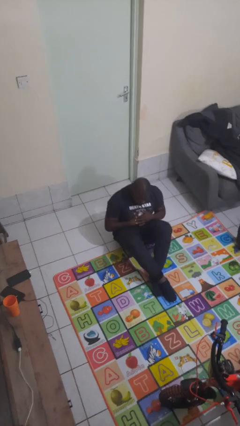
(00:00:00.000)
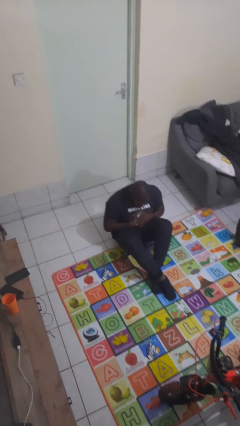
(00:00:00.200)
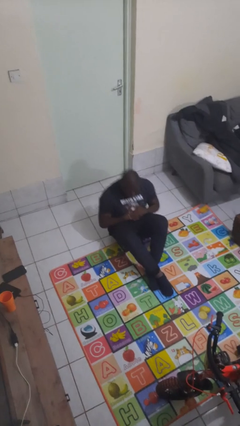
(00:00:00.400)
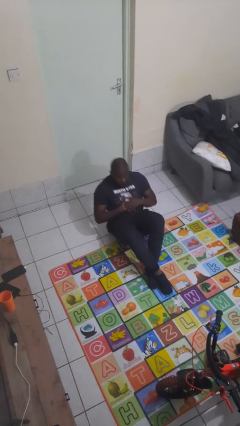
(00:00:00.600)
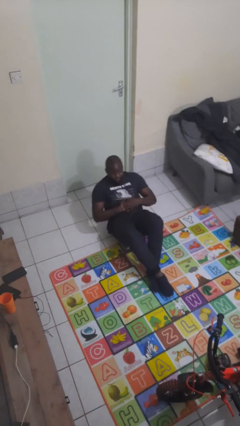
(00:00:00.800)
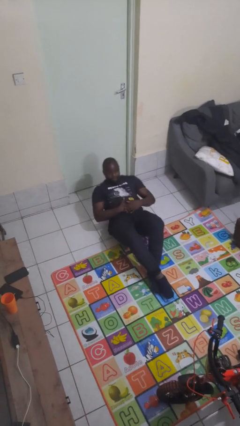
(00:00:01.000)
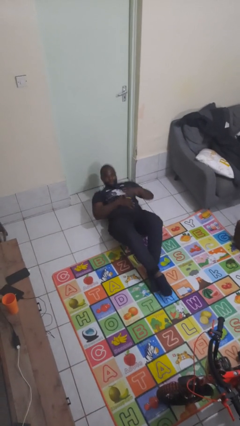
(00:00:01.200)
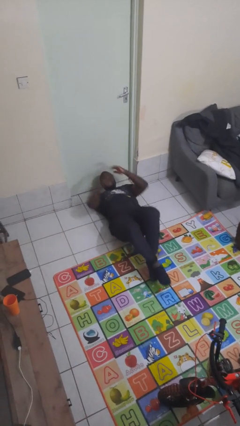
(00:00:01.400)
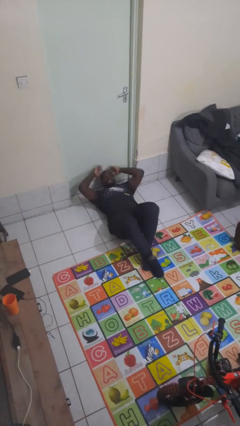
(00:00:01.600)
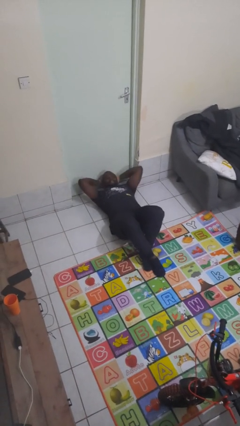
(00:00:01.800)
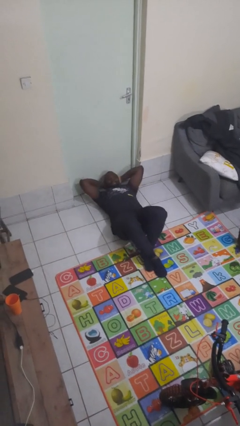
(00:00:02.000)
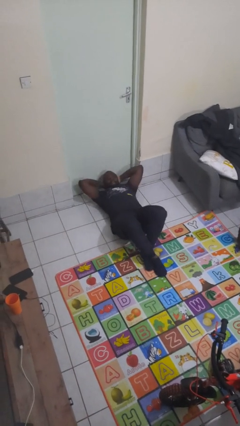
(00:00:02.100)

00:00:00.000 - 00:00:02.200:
person exercises with situp

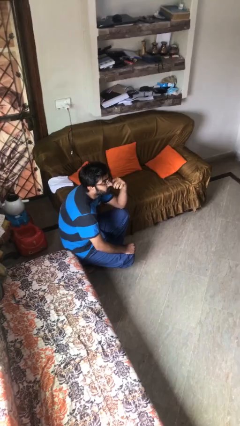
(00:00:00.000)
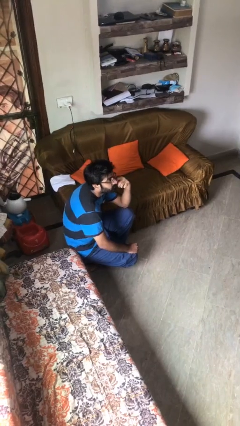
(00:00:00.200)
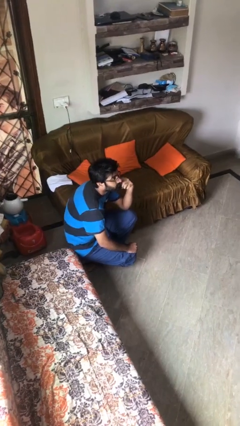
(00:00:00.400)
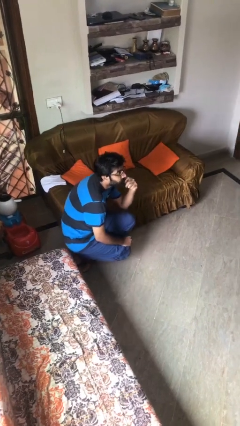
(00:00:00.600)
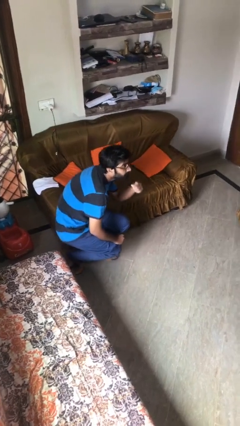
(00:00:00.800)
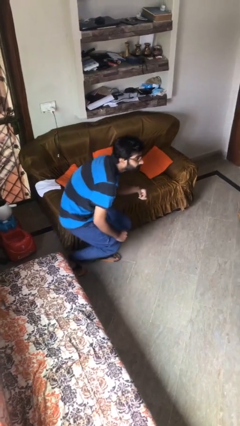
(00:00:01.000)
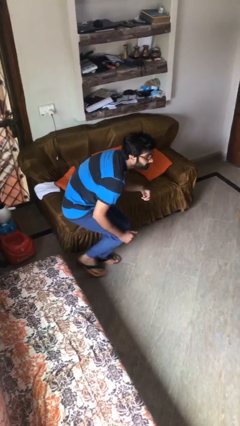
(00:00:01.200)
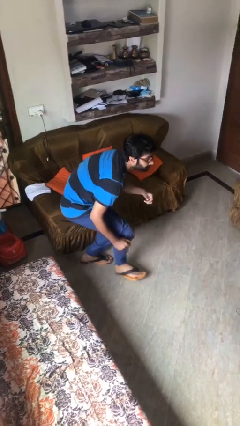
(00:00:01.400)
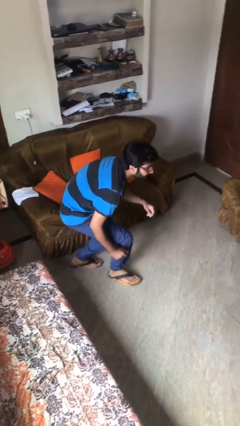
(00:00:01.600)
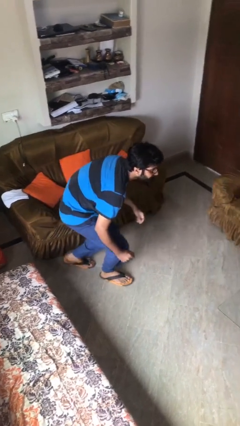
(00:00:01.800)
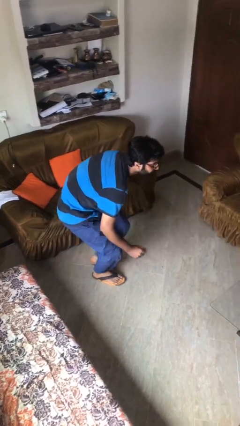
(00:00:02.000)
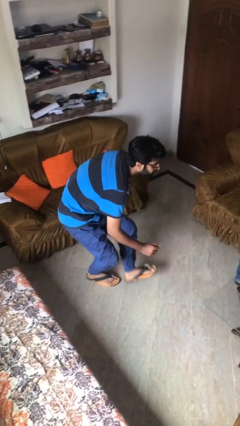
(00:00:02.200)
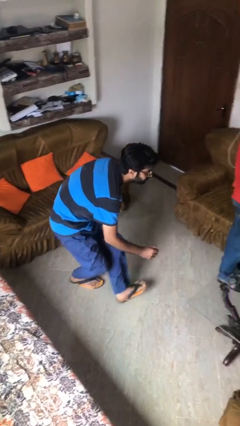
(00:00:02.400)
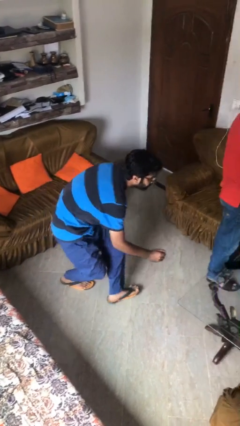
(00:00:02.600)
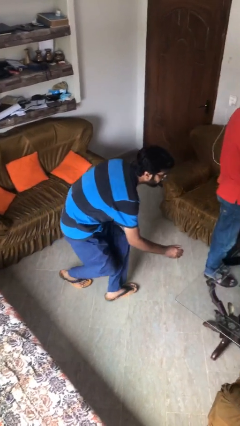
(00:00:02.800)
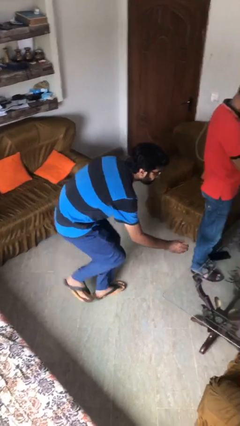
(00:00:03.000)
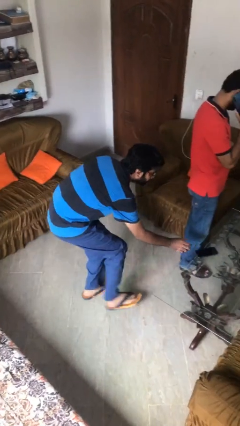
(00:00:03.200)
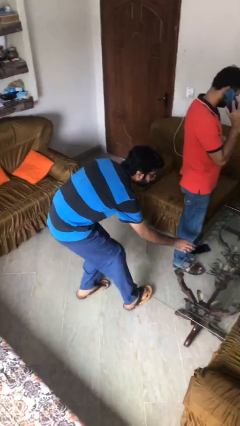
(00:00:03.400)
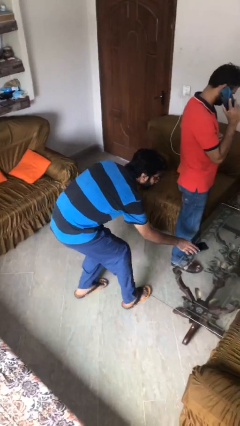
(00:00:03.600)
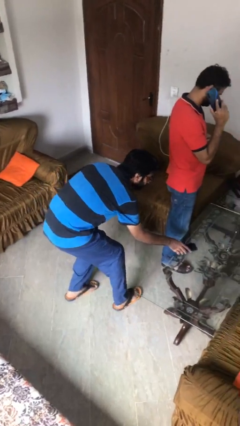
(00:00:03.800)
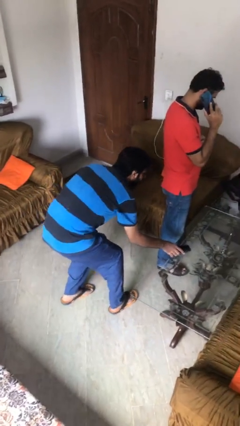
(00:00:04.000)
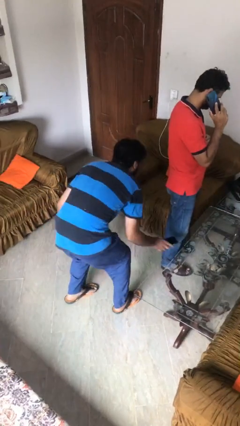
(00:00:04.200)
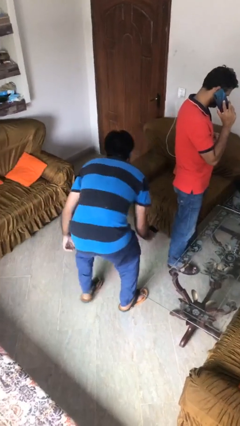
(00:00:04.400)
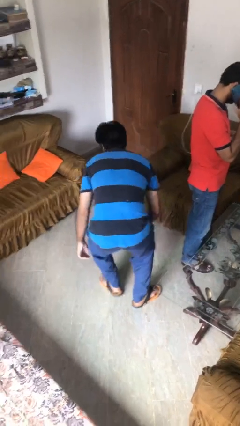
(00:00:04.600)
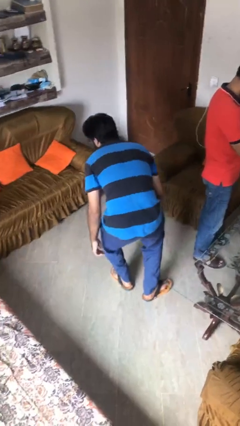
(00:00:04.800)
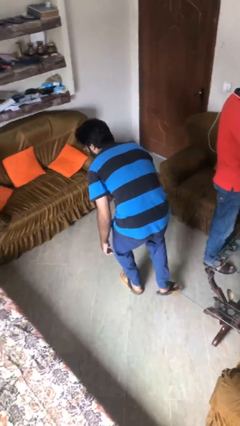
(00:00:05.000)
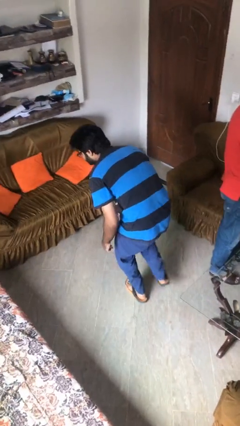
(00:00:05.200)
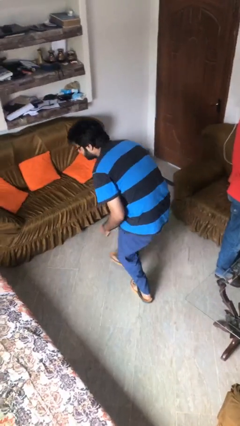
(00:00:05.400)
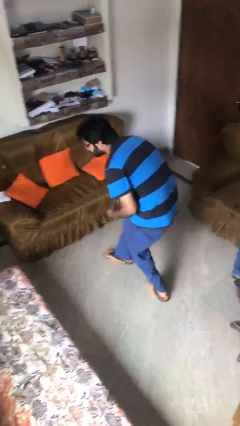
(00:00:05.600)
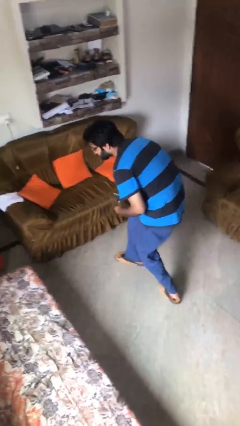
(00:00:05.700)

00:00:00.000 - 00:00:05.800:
person steals object from person

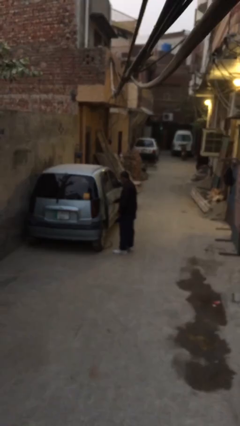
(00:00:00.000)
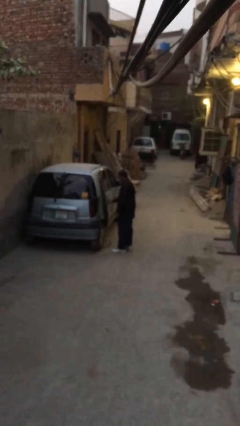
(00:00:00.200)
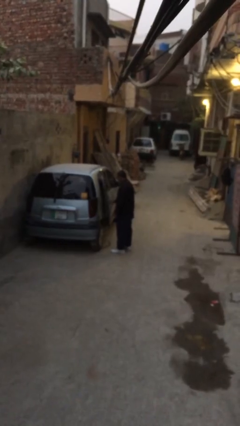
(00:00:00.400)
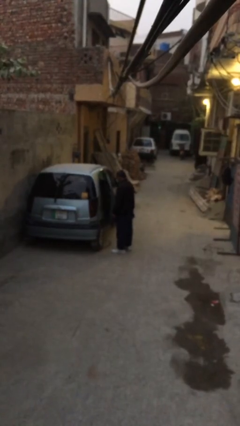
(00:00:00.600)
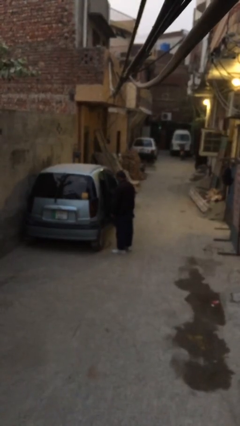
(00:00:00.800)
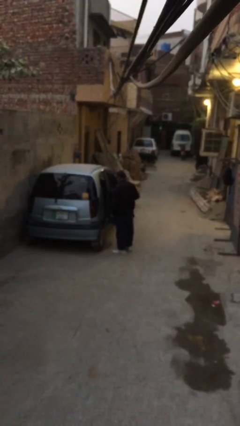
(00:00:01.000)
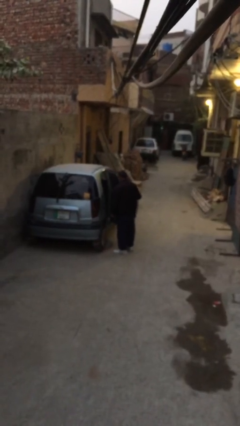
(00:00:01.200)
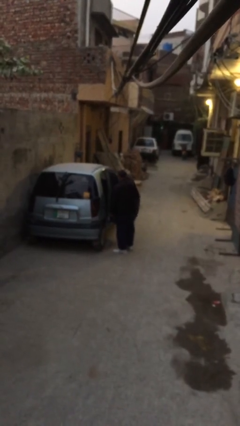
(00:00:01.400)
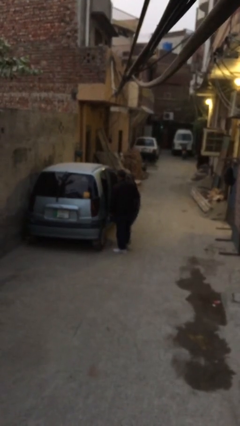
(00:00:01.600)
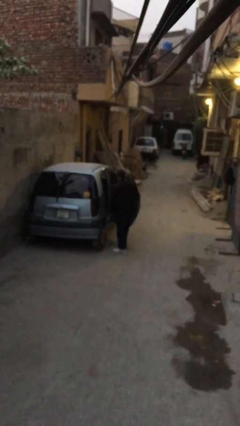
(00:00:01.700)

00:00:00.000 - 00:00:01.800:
person opens car door

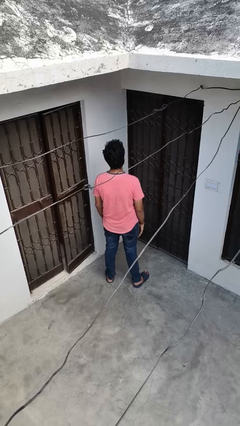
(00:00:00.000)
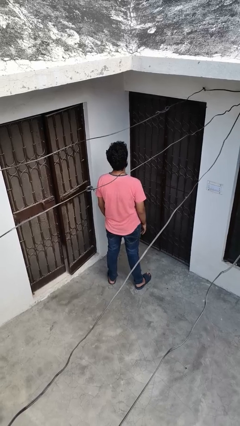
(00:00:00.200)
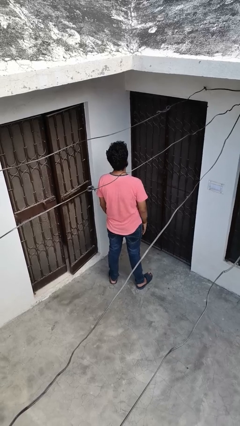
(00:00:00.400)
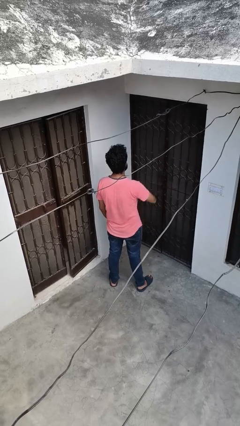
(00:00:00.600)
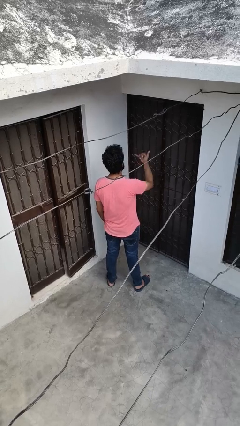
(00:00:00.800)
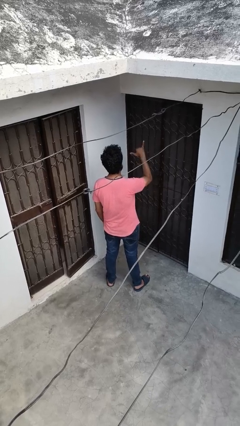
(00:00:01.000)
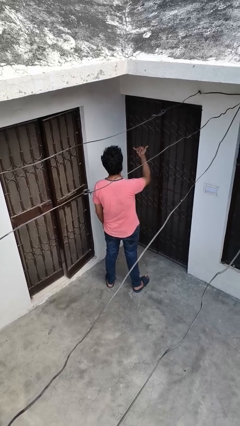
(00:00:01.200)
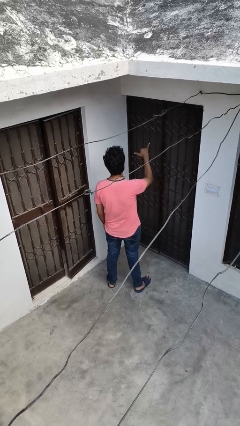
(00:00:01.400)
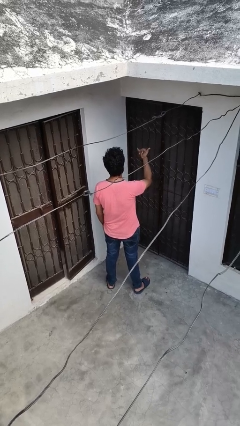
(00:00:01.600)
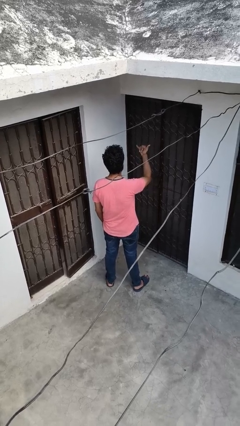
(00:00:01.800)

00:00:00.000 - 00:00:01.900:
person gestures hang loose

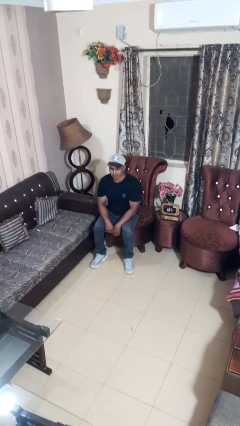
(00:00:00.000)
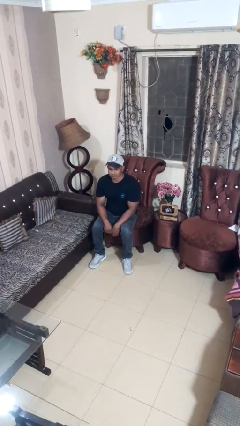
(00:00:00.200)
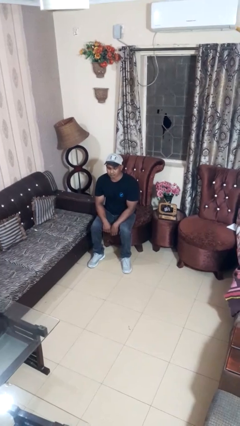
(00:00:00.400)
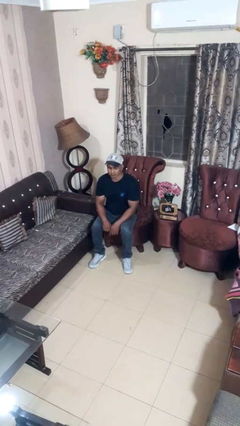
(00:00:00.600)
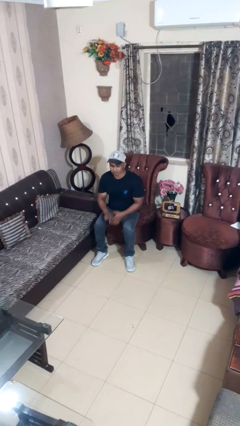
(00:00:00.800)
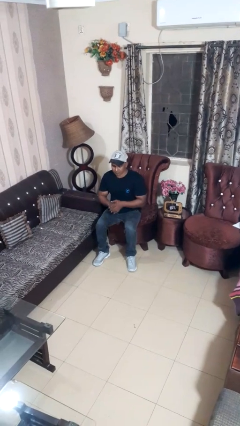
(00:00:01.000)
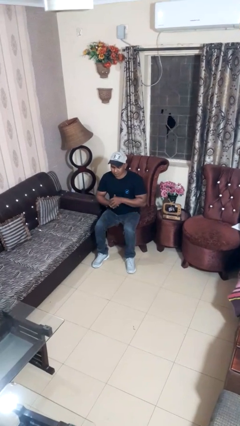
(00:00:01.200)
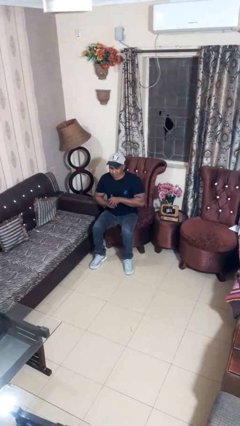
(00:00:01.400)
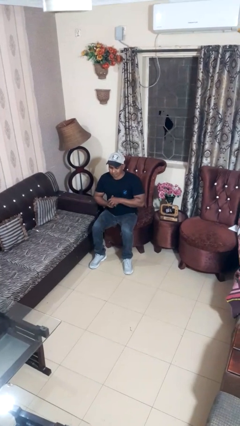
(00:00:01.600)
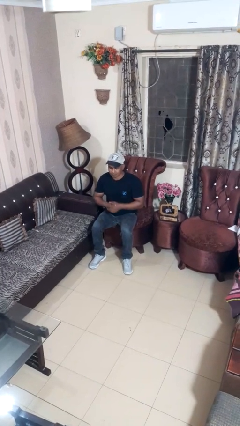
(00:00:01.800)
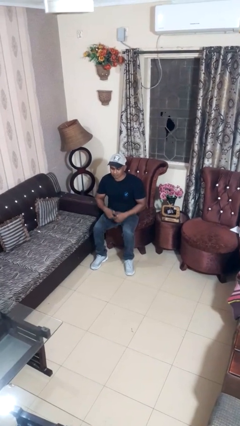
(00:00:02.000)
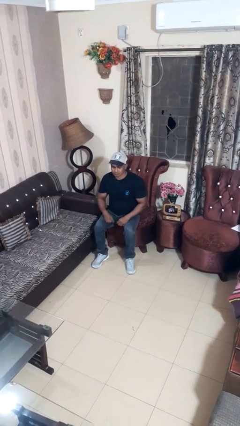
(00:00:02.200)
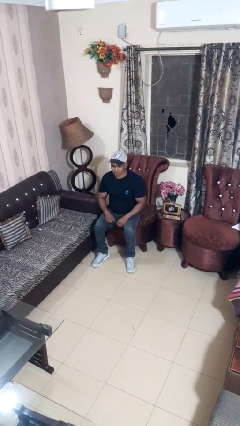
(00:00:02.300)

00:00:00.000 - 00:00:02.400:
person cracks knuckles

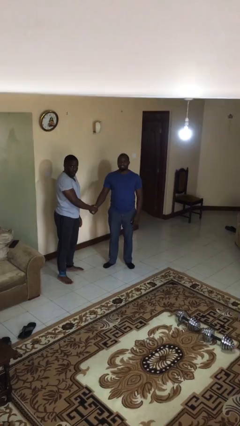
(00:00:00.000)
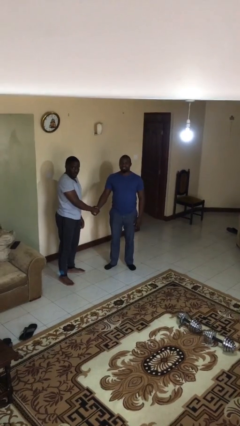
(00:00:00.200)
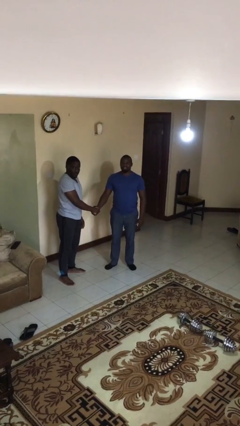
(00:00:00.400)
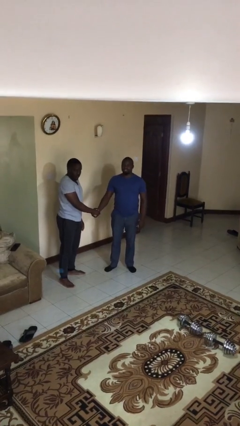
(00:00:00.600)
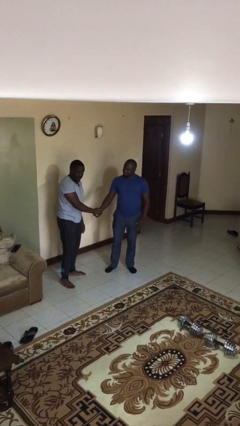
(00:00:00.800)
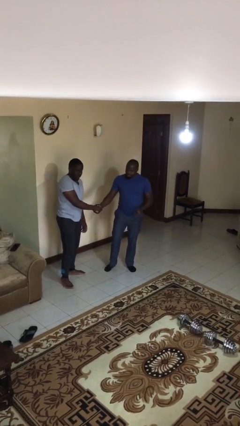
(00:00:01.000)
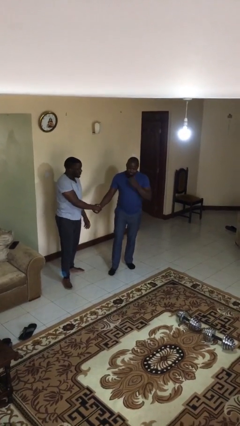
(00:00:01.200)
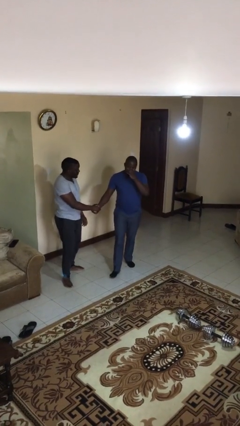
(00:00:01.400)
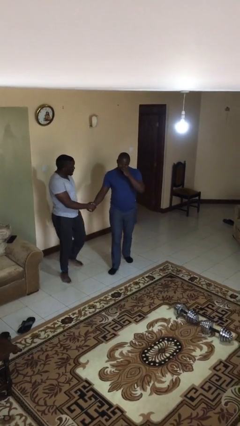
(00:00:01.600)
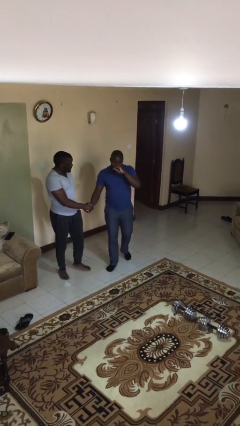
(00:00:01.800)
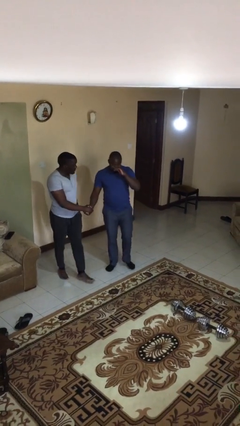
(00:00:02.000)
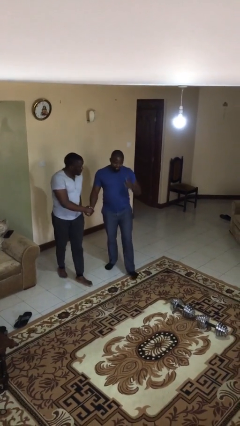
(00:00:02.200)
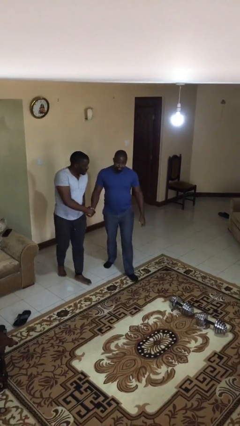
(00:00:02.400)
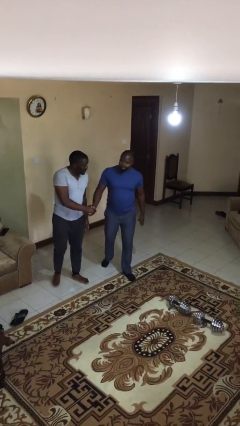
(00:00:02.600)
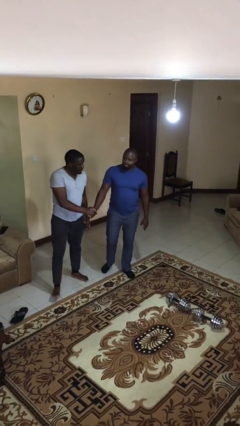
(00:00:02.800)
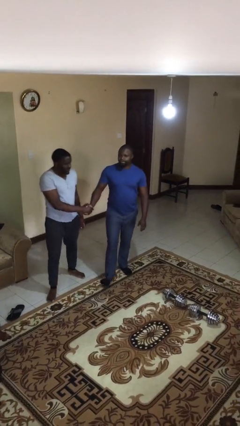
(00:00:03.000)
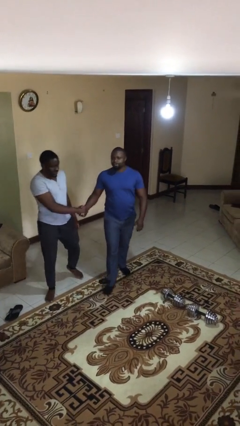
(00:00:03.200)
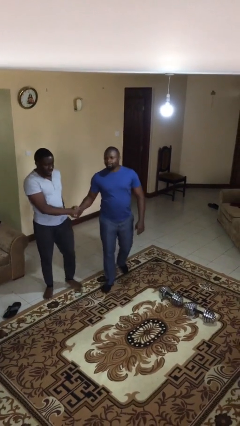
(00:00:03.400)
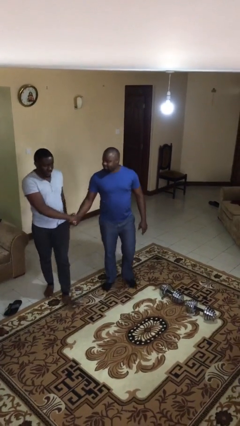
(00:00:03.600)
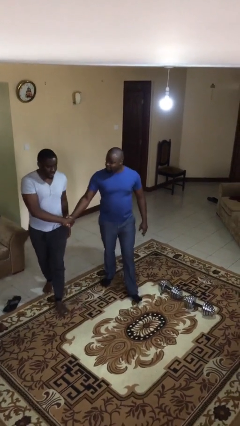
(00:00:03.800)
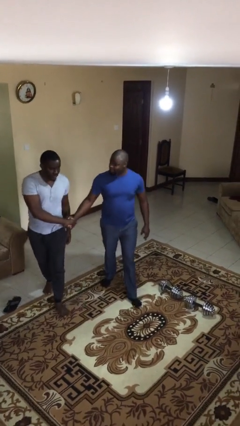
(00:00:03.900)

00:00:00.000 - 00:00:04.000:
person holds hand
